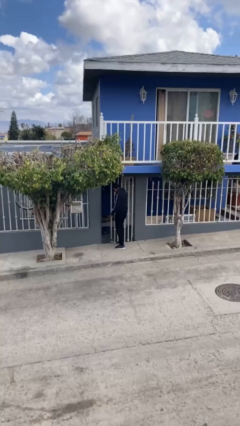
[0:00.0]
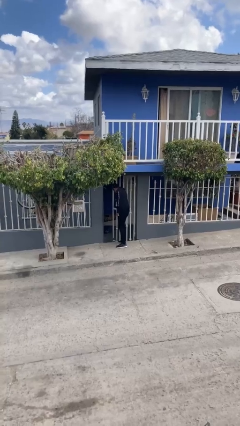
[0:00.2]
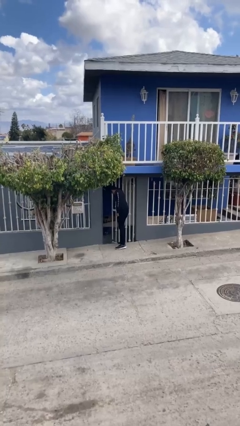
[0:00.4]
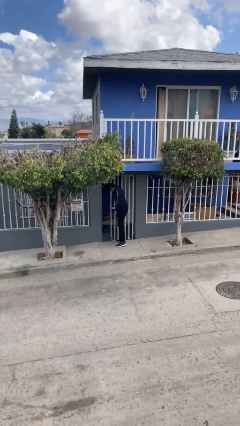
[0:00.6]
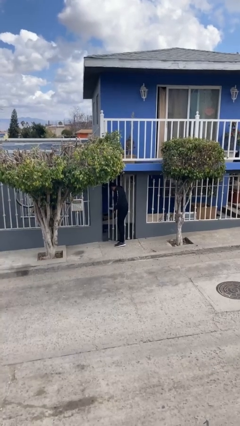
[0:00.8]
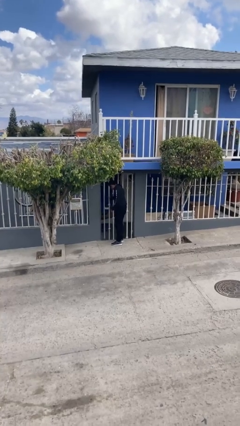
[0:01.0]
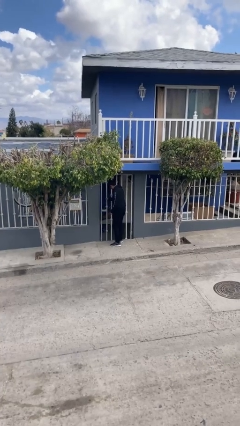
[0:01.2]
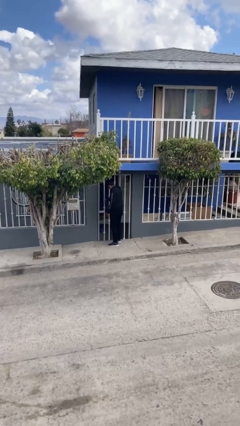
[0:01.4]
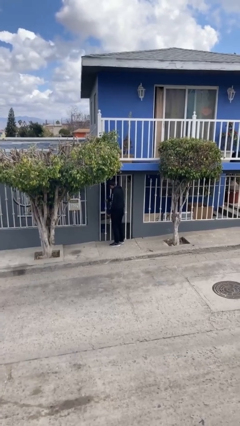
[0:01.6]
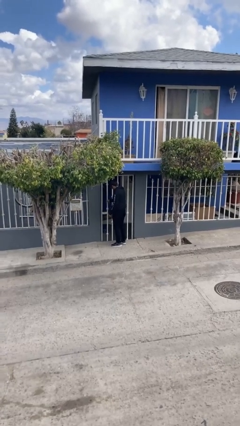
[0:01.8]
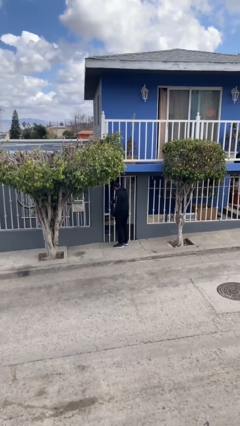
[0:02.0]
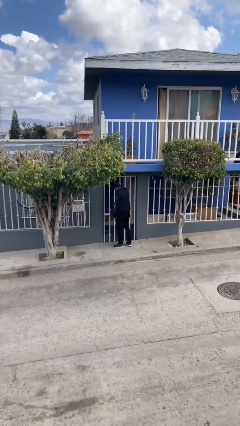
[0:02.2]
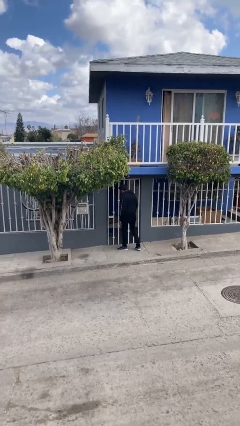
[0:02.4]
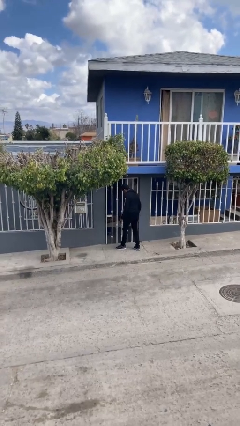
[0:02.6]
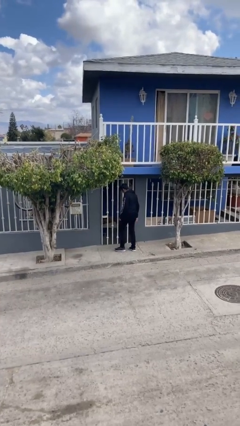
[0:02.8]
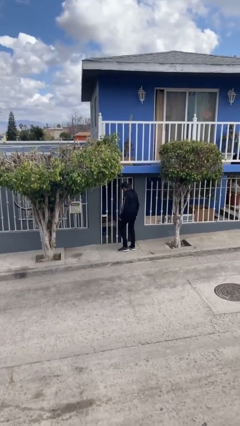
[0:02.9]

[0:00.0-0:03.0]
person closes facility door

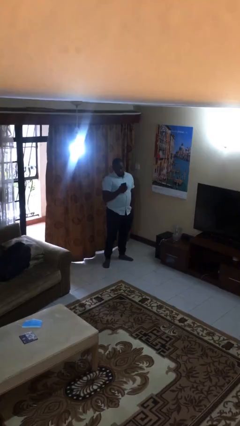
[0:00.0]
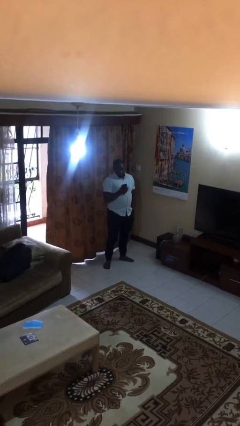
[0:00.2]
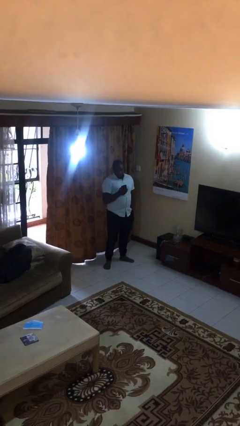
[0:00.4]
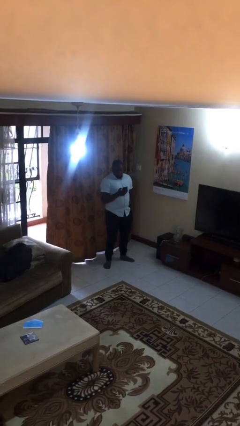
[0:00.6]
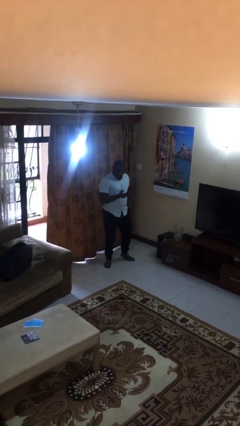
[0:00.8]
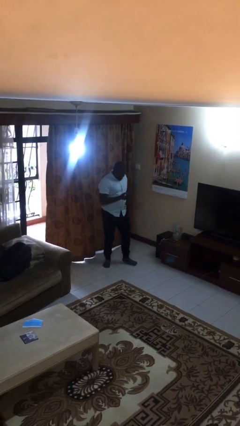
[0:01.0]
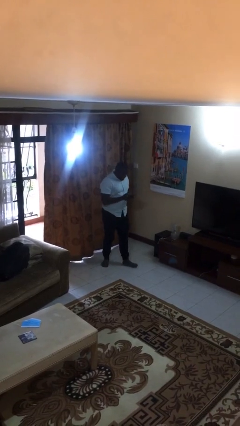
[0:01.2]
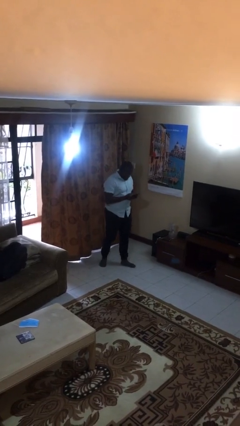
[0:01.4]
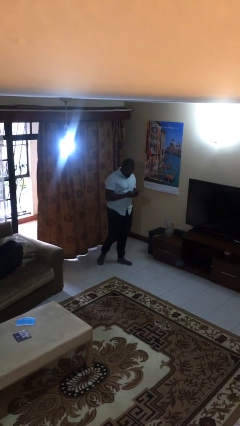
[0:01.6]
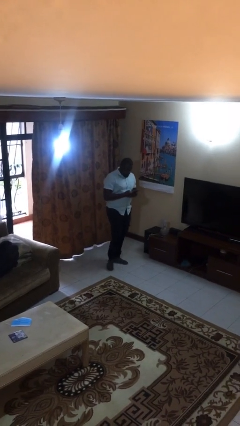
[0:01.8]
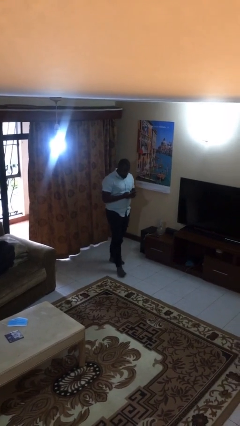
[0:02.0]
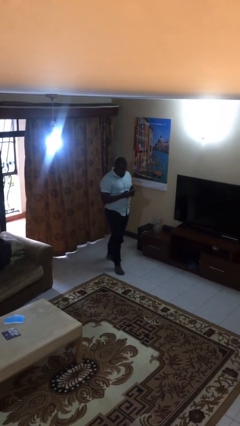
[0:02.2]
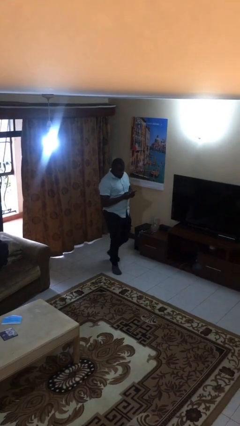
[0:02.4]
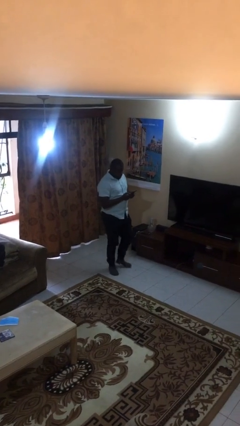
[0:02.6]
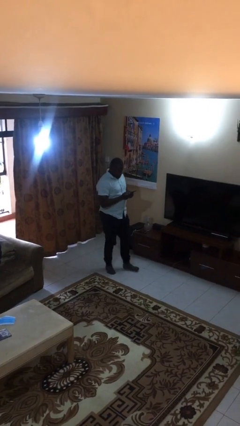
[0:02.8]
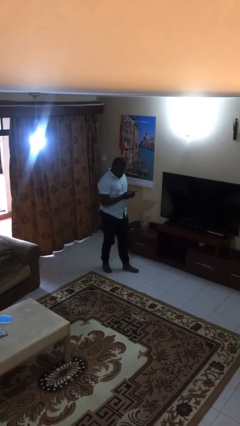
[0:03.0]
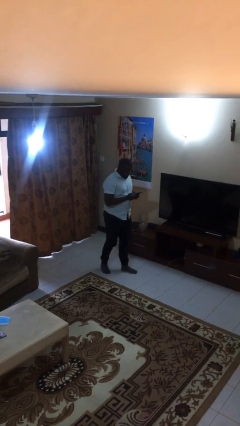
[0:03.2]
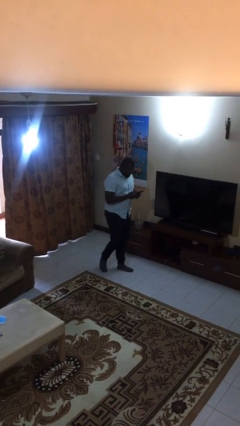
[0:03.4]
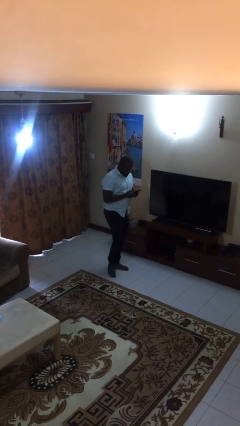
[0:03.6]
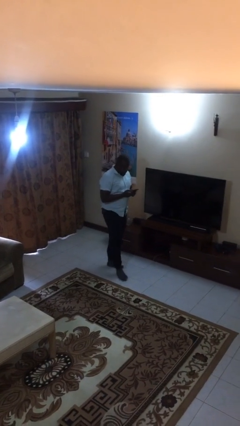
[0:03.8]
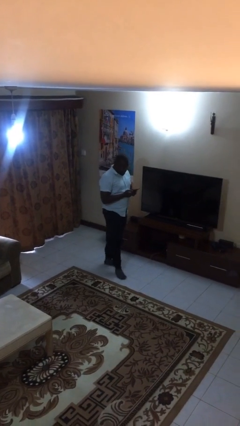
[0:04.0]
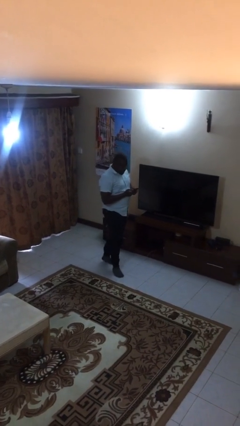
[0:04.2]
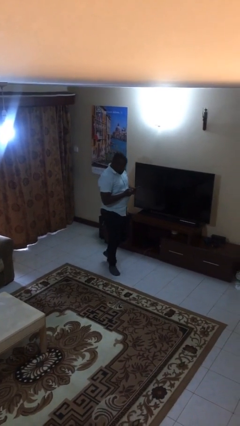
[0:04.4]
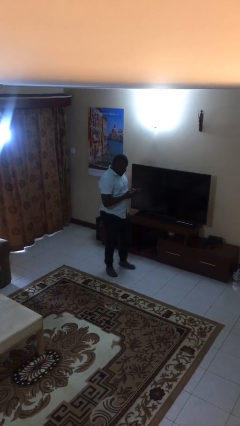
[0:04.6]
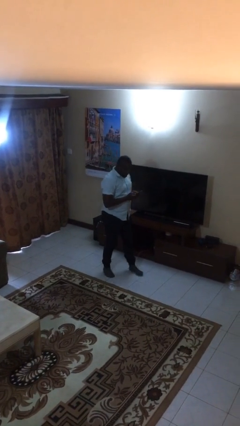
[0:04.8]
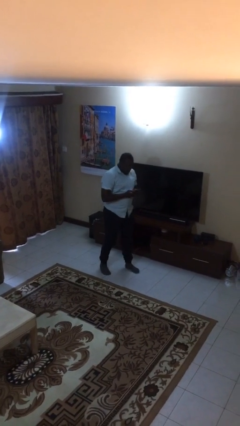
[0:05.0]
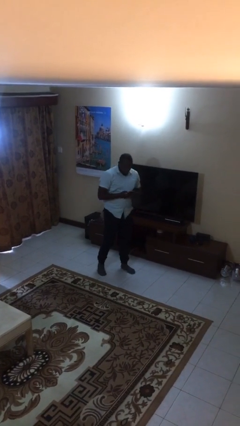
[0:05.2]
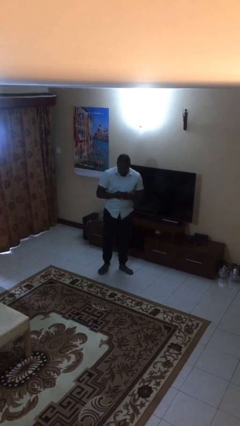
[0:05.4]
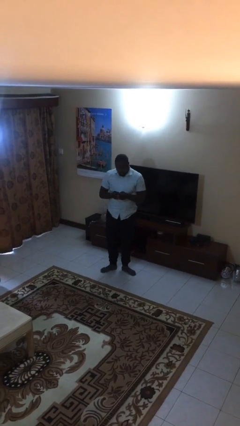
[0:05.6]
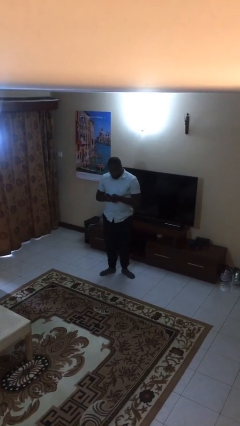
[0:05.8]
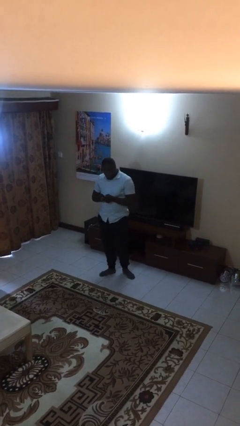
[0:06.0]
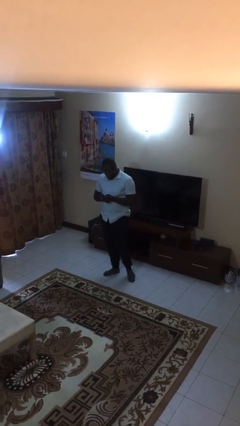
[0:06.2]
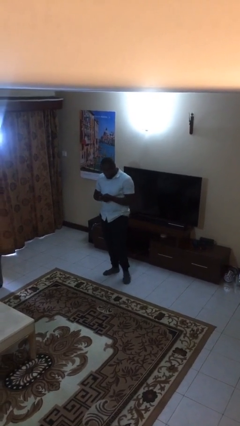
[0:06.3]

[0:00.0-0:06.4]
person texts on phone

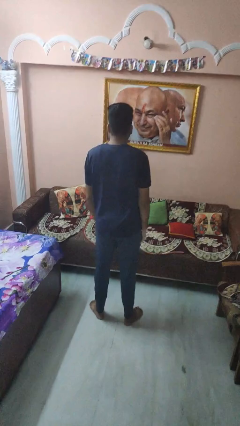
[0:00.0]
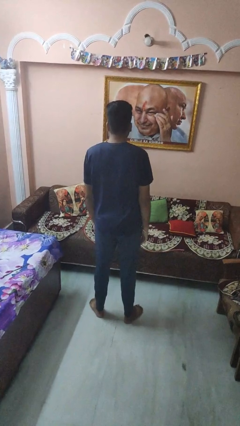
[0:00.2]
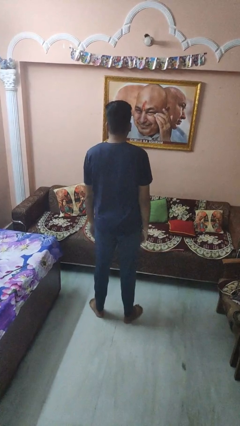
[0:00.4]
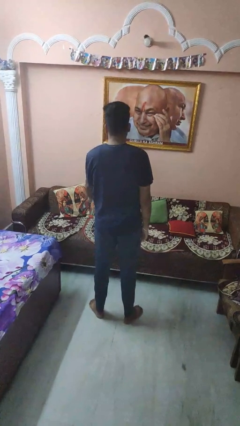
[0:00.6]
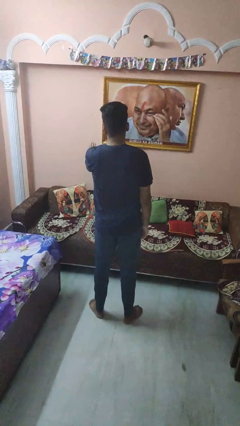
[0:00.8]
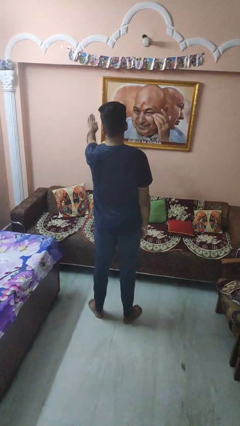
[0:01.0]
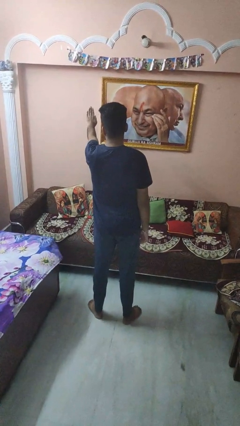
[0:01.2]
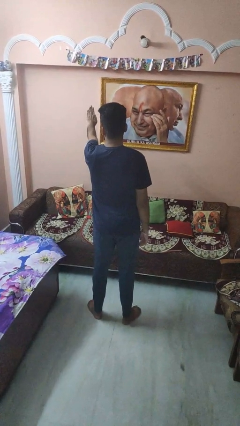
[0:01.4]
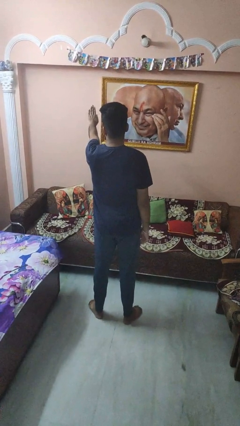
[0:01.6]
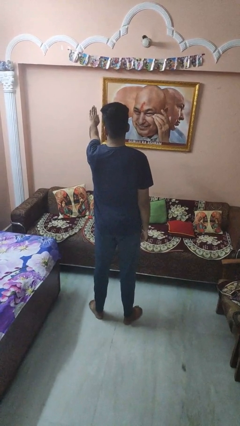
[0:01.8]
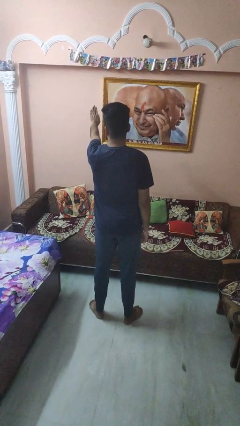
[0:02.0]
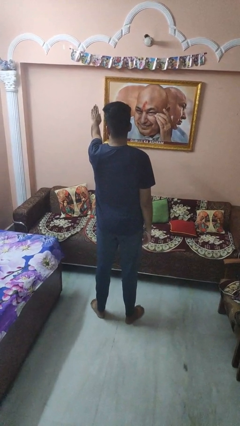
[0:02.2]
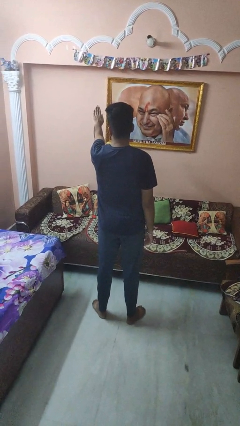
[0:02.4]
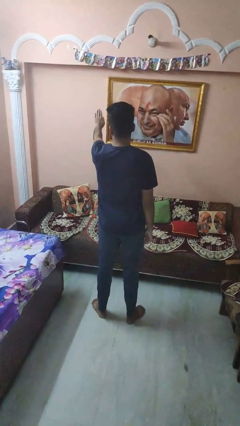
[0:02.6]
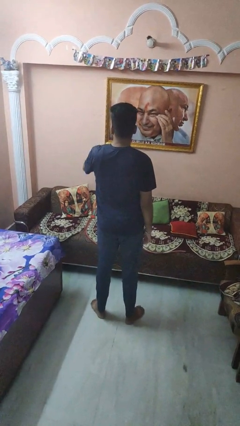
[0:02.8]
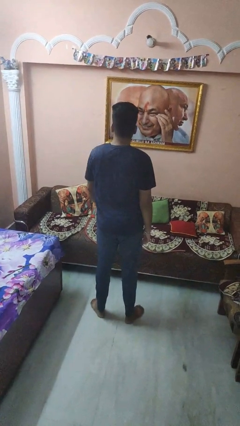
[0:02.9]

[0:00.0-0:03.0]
person gestures stop

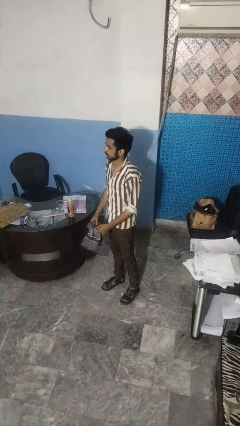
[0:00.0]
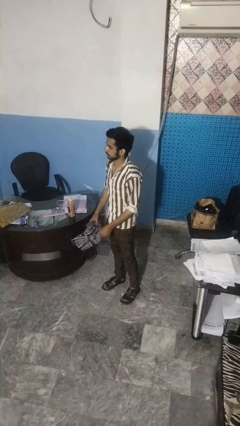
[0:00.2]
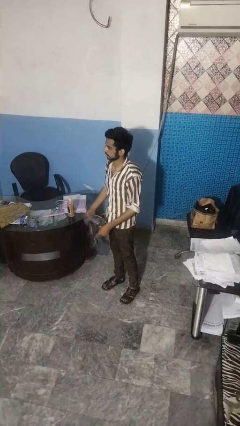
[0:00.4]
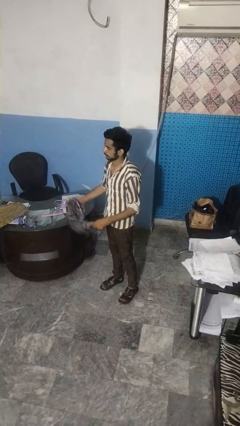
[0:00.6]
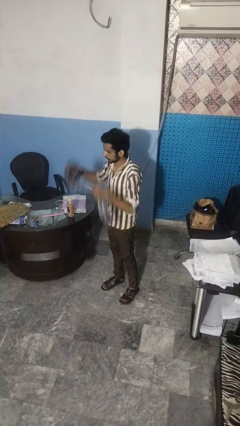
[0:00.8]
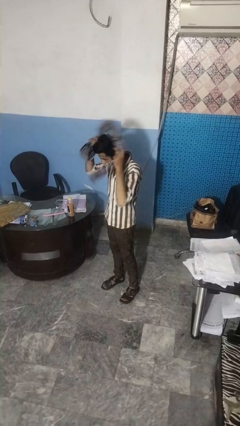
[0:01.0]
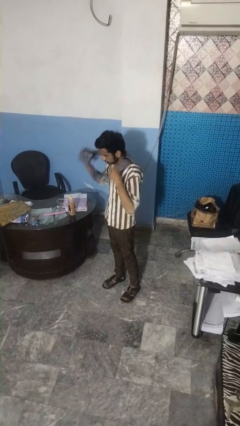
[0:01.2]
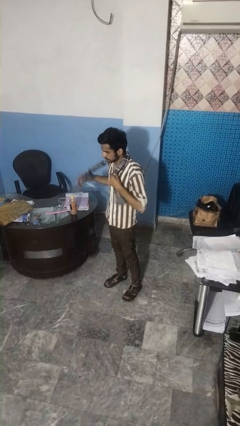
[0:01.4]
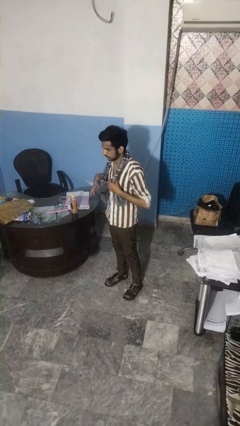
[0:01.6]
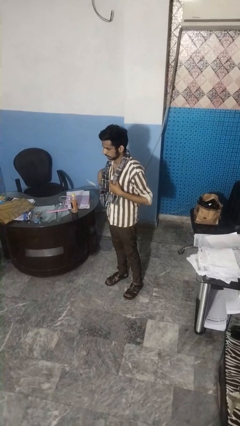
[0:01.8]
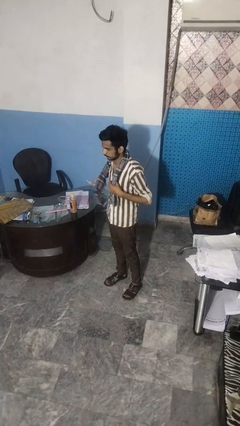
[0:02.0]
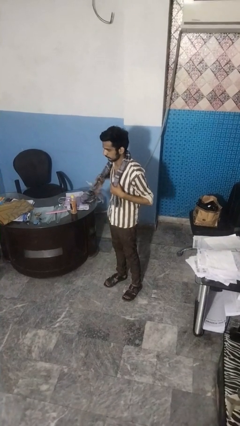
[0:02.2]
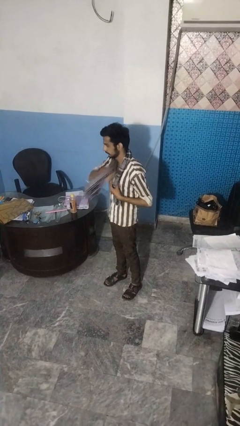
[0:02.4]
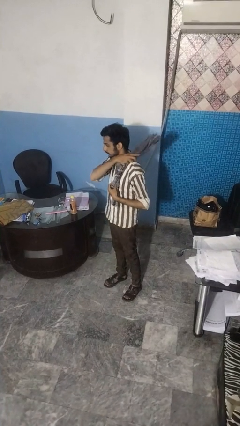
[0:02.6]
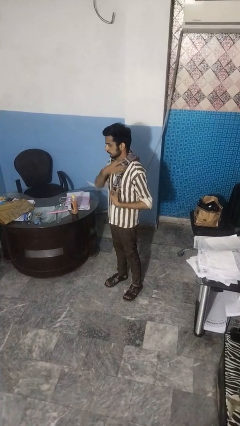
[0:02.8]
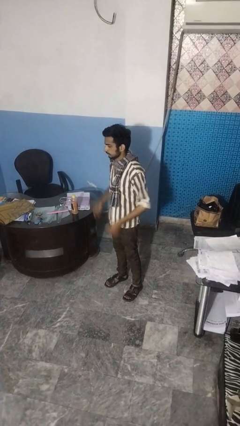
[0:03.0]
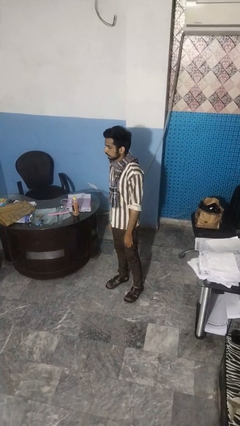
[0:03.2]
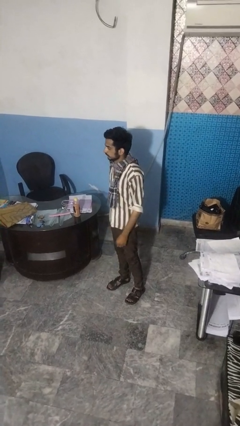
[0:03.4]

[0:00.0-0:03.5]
person puts on scarf

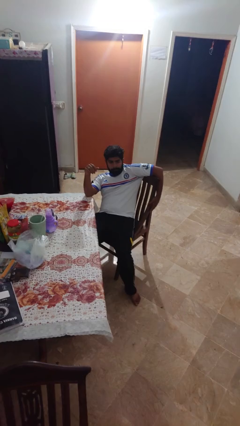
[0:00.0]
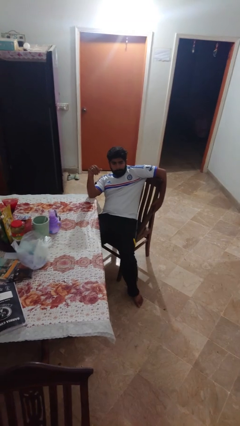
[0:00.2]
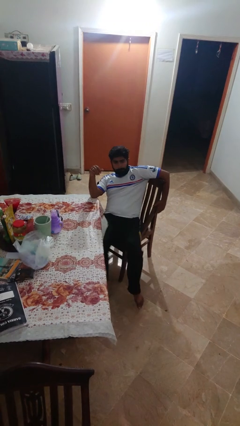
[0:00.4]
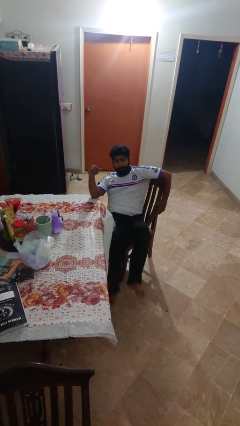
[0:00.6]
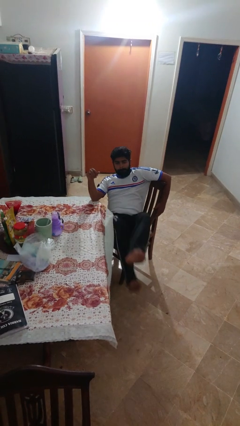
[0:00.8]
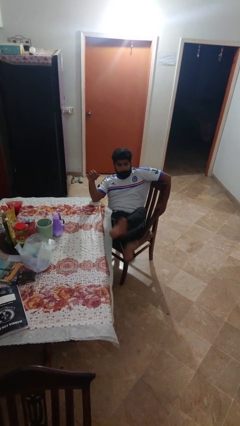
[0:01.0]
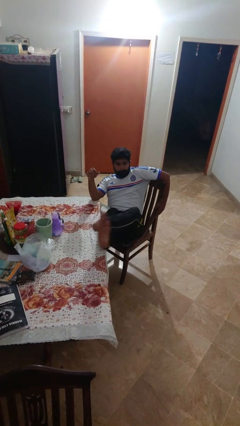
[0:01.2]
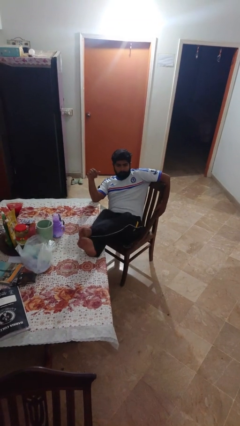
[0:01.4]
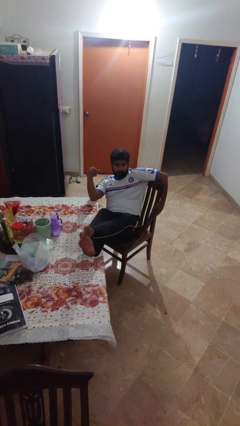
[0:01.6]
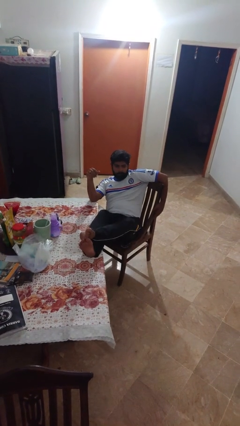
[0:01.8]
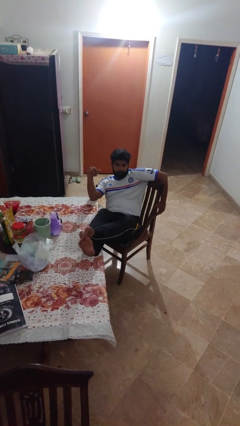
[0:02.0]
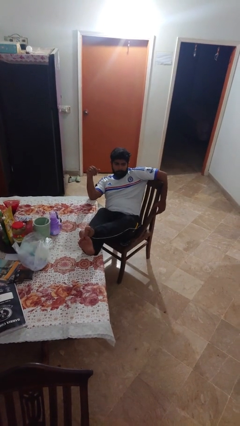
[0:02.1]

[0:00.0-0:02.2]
person puts feet up
